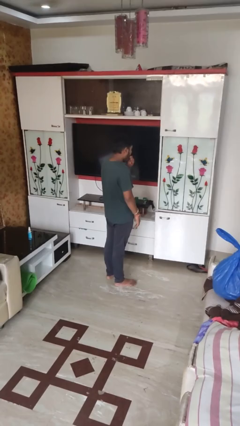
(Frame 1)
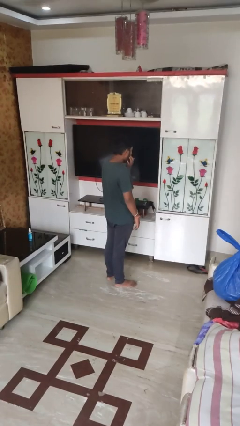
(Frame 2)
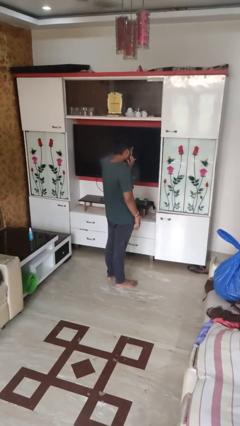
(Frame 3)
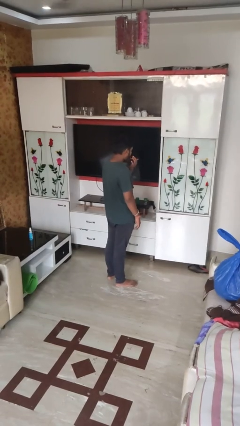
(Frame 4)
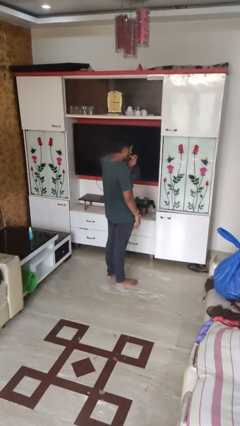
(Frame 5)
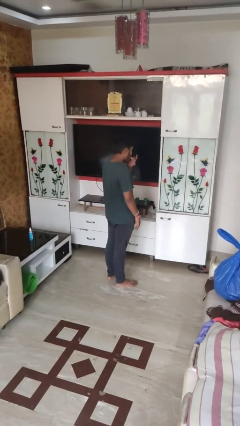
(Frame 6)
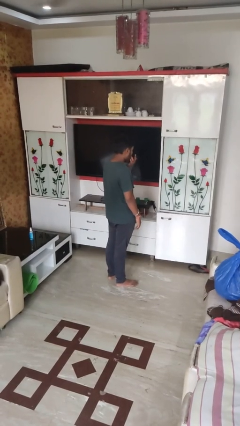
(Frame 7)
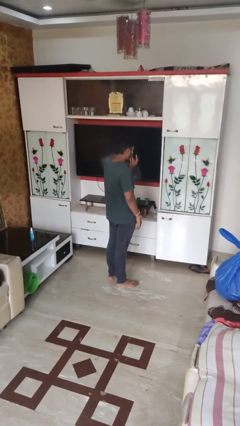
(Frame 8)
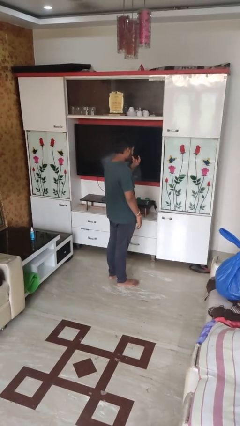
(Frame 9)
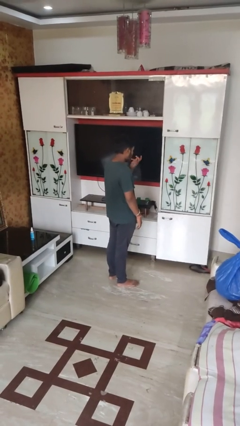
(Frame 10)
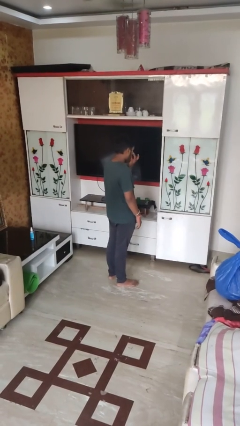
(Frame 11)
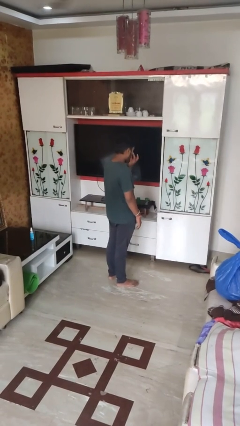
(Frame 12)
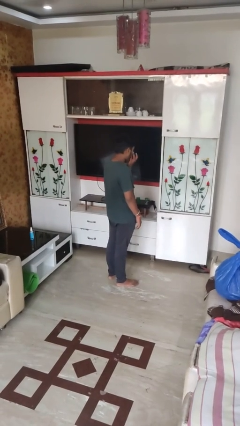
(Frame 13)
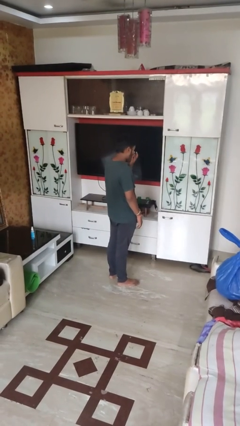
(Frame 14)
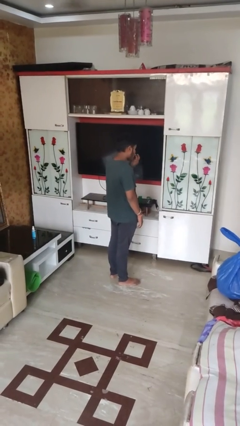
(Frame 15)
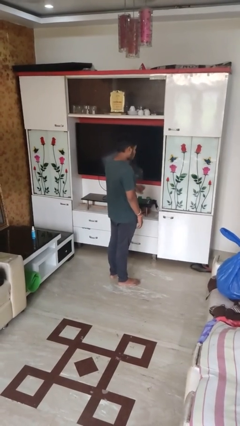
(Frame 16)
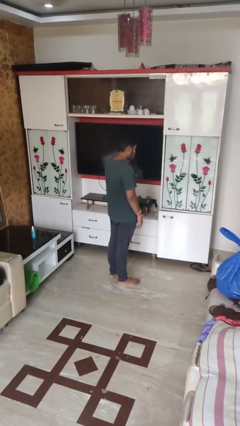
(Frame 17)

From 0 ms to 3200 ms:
person licks fingers

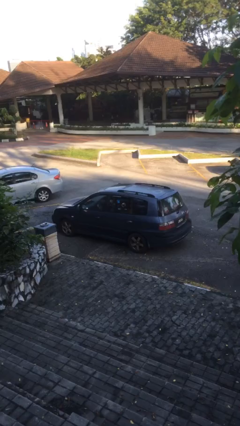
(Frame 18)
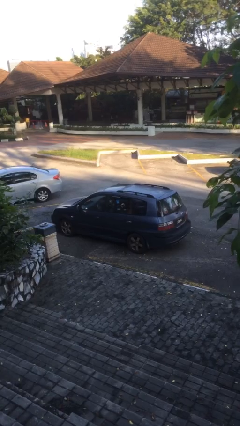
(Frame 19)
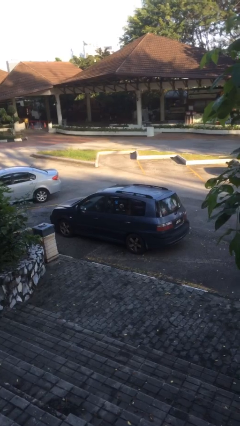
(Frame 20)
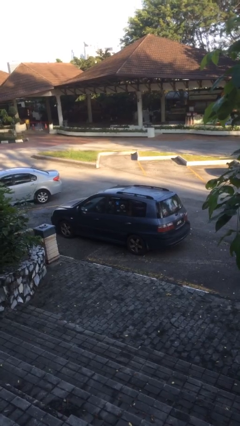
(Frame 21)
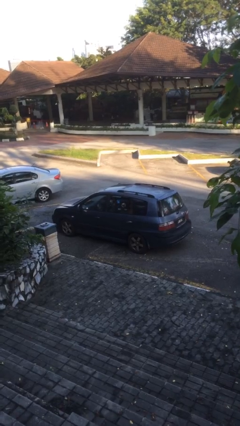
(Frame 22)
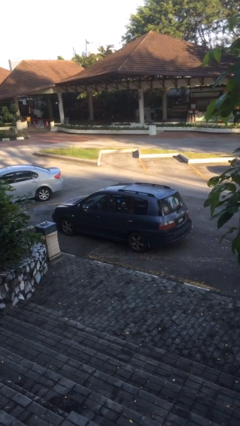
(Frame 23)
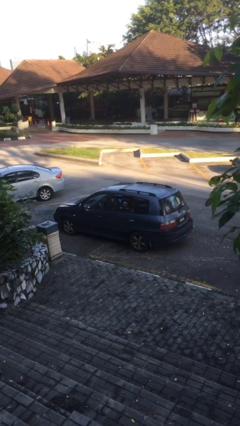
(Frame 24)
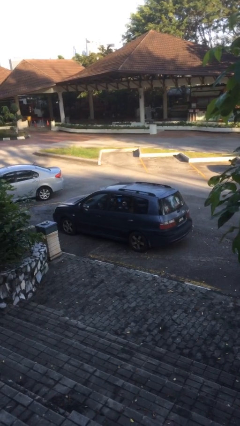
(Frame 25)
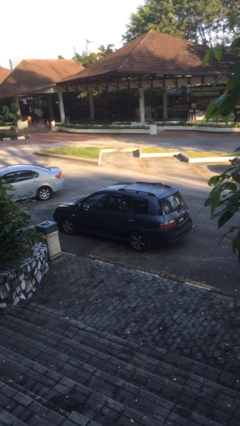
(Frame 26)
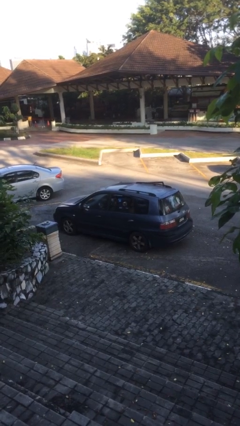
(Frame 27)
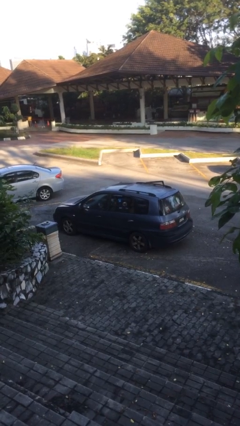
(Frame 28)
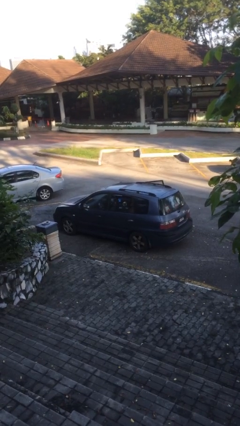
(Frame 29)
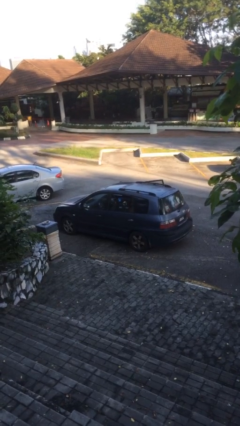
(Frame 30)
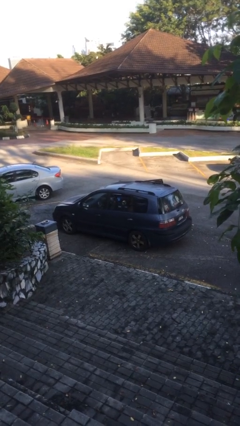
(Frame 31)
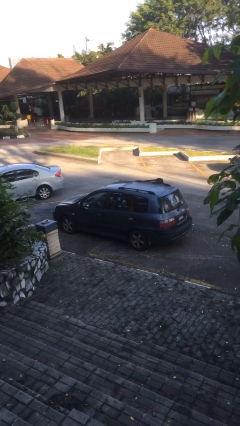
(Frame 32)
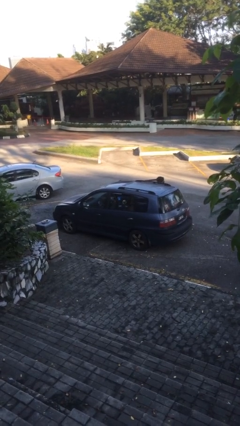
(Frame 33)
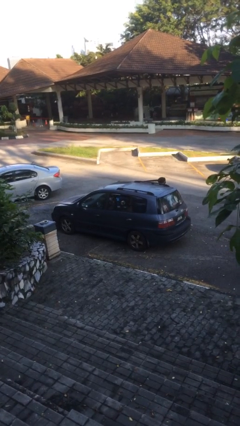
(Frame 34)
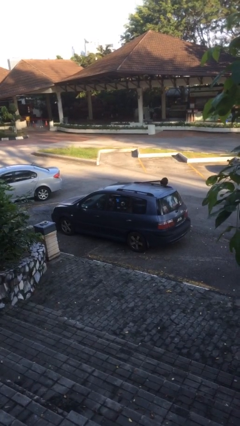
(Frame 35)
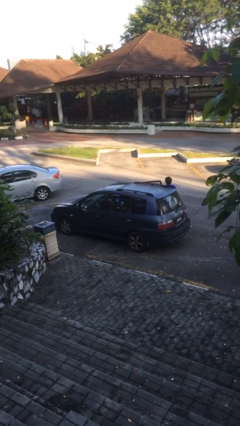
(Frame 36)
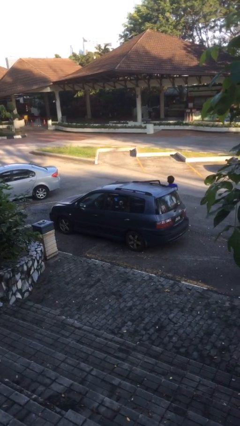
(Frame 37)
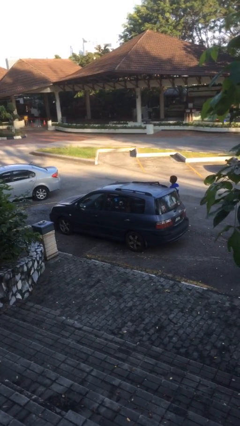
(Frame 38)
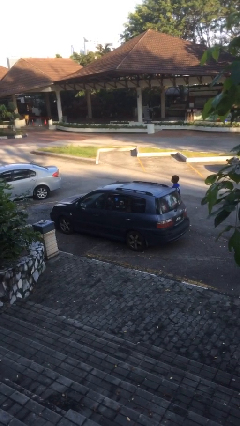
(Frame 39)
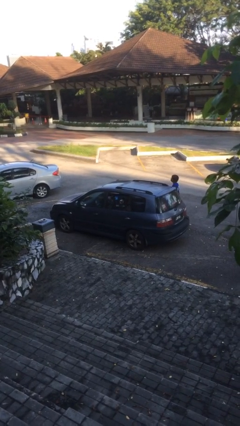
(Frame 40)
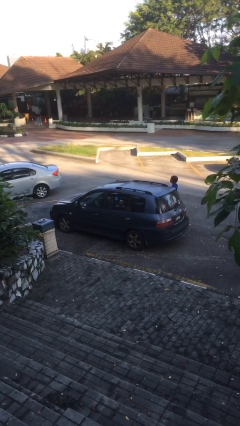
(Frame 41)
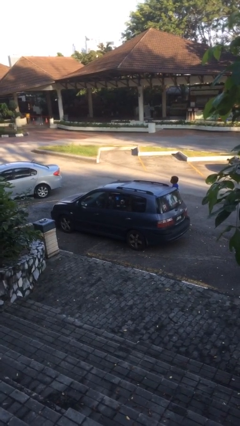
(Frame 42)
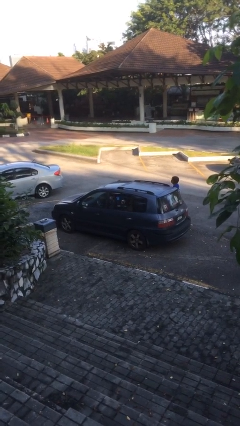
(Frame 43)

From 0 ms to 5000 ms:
car drops off person

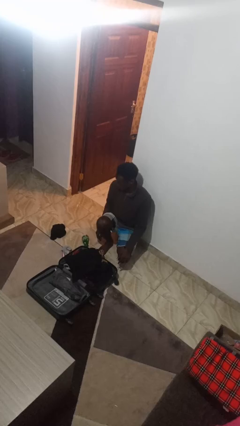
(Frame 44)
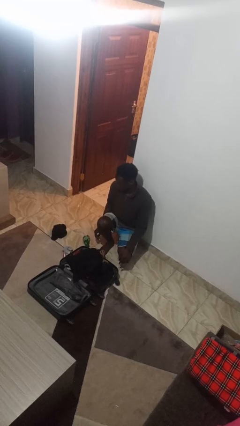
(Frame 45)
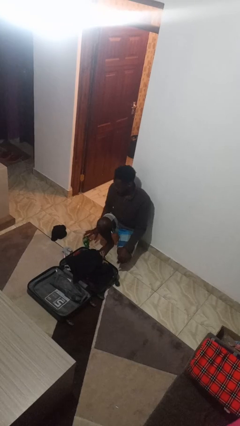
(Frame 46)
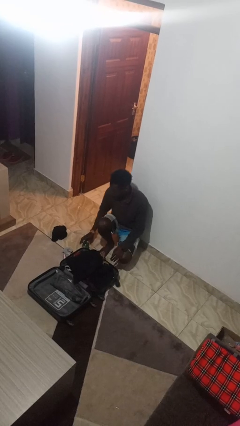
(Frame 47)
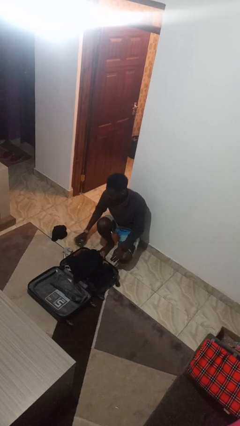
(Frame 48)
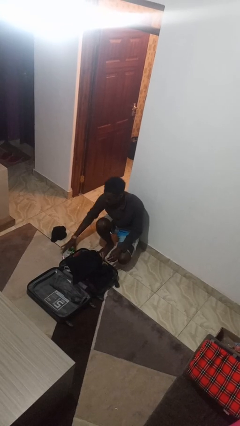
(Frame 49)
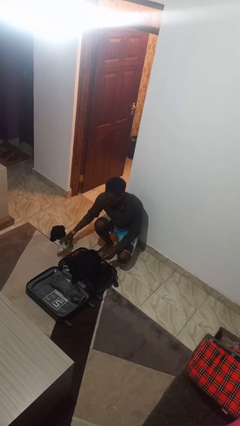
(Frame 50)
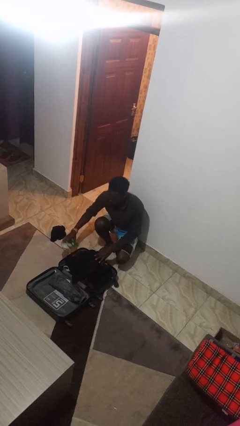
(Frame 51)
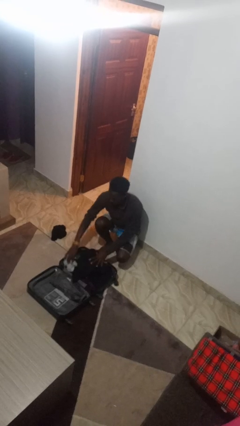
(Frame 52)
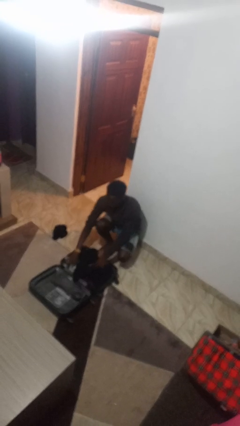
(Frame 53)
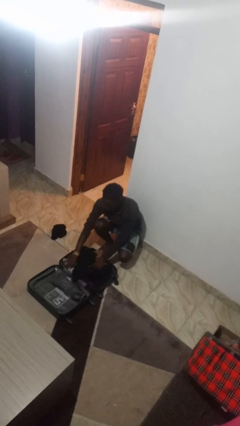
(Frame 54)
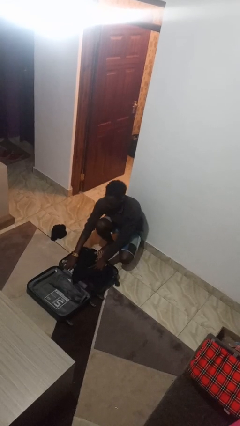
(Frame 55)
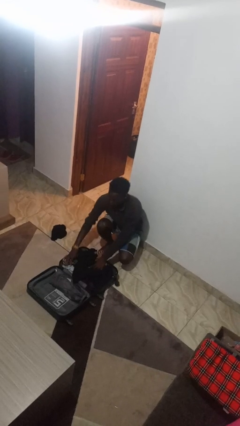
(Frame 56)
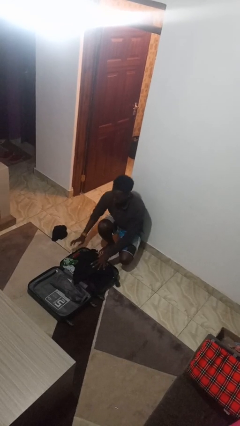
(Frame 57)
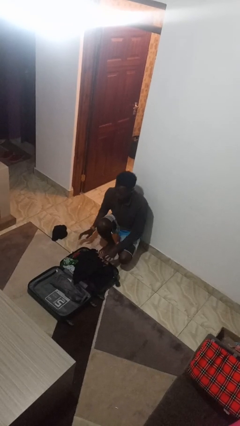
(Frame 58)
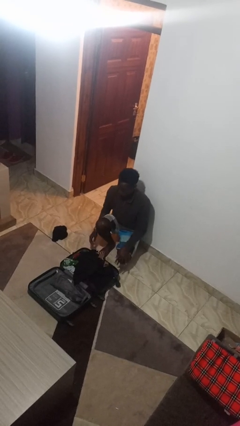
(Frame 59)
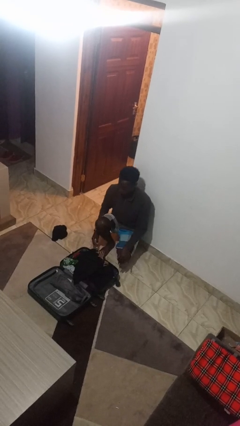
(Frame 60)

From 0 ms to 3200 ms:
person loads clothes into suitcase

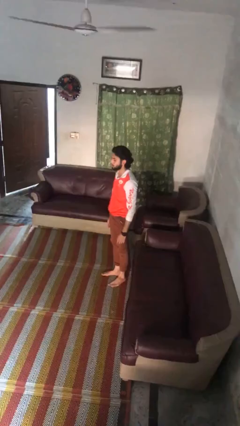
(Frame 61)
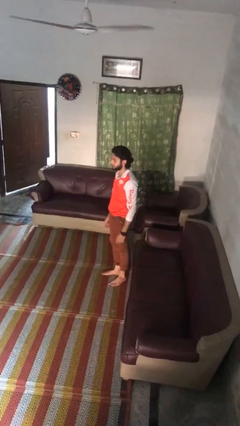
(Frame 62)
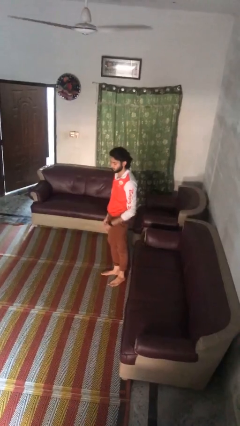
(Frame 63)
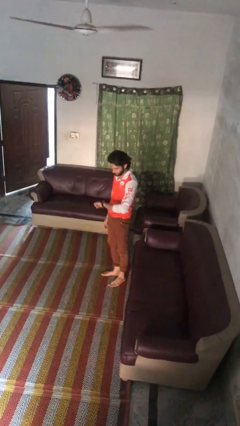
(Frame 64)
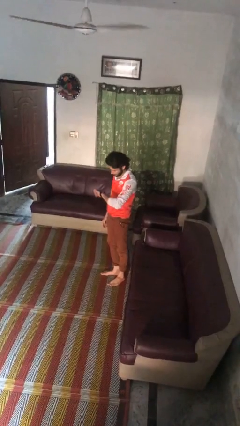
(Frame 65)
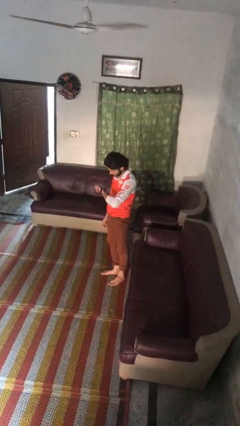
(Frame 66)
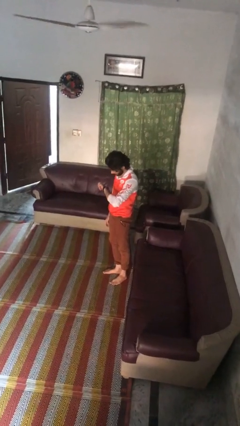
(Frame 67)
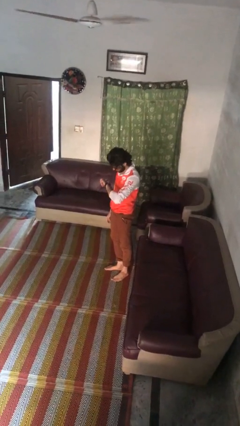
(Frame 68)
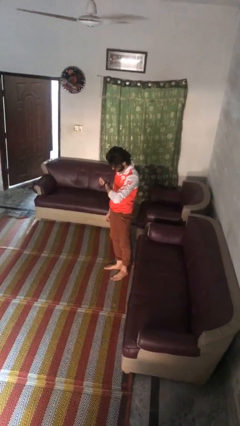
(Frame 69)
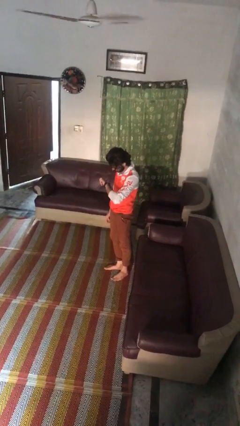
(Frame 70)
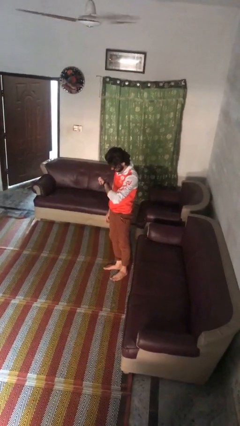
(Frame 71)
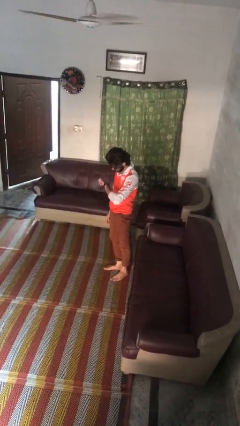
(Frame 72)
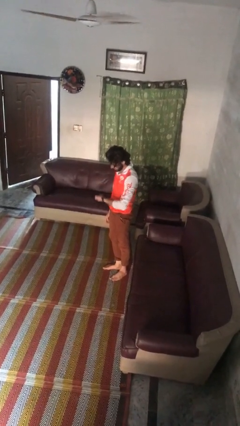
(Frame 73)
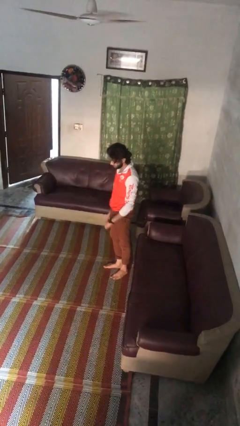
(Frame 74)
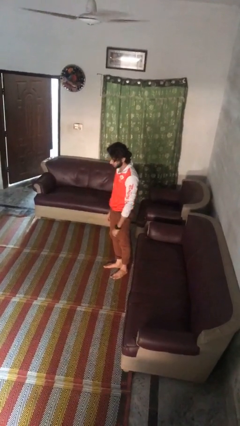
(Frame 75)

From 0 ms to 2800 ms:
person looks at wristwatch

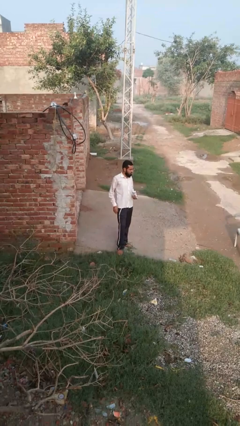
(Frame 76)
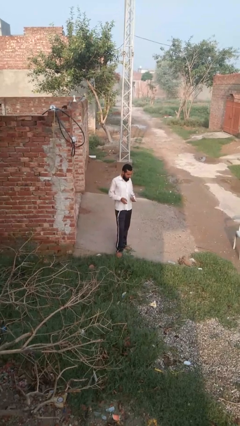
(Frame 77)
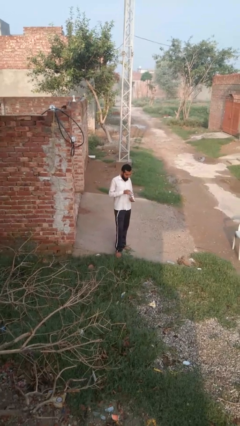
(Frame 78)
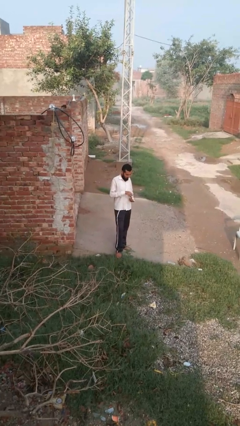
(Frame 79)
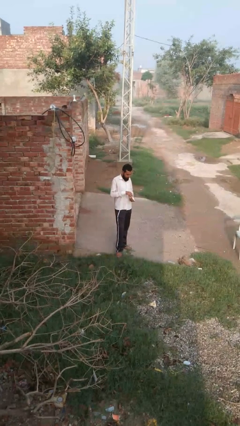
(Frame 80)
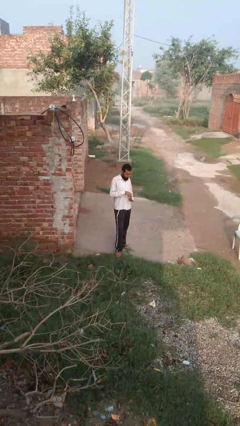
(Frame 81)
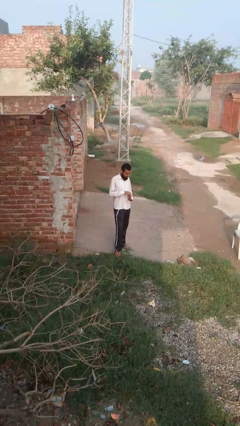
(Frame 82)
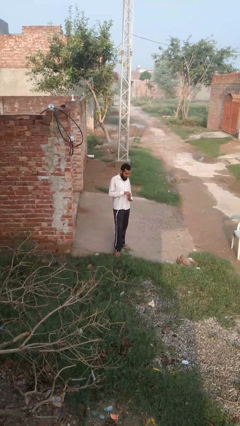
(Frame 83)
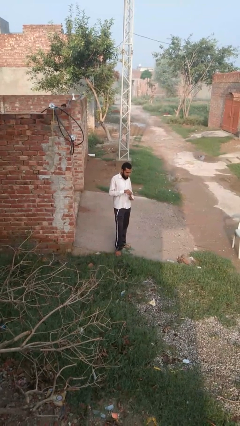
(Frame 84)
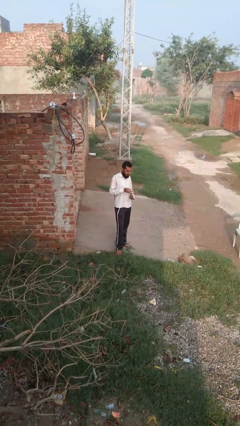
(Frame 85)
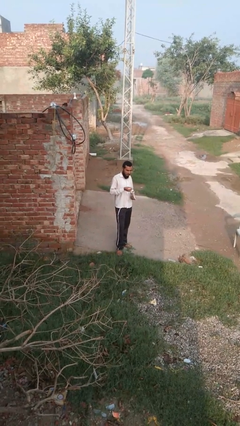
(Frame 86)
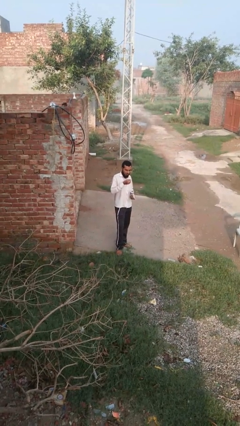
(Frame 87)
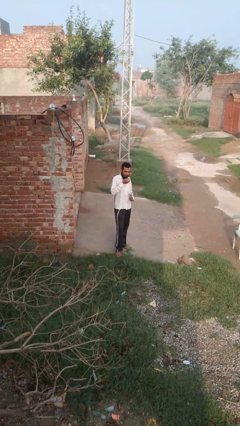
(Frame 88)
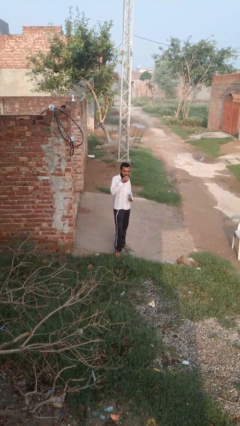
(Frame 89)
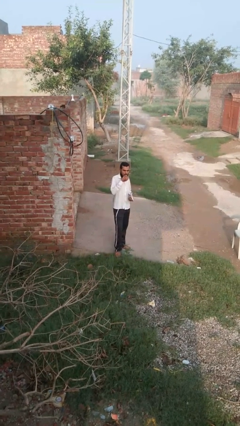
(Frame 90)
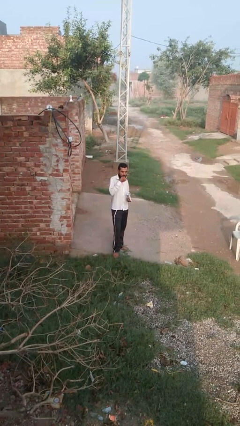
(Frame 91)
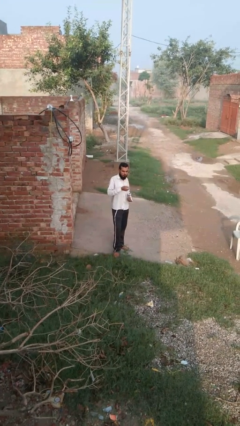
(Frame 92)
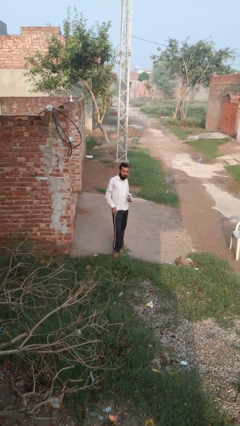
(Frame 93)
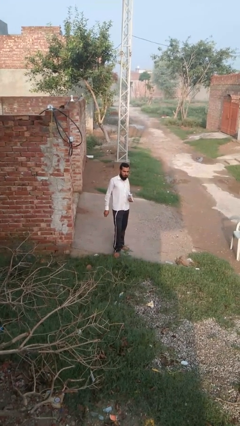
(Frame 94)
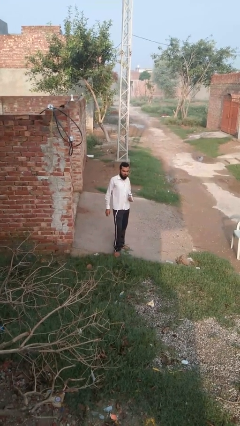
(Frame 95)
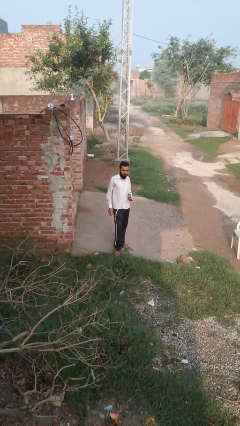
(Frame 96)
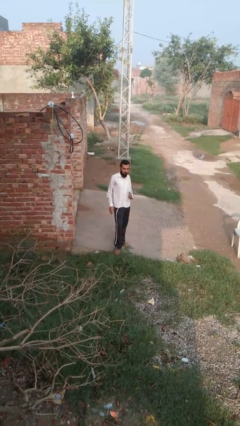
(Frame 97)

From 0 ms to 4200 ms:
person eats snack from bag
